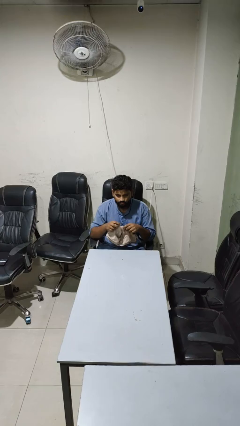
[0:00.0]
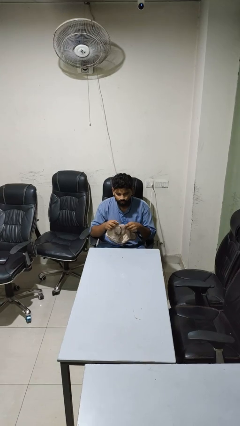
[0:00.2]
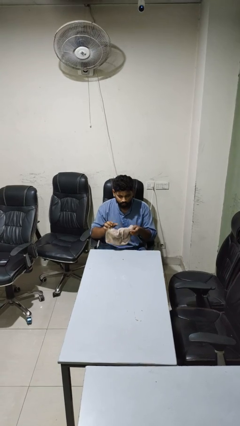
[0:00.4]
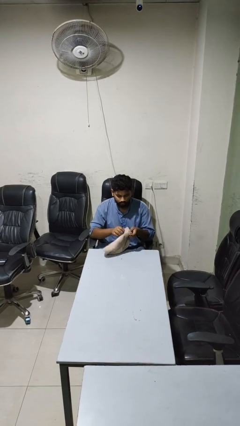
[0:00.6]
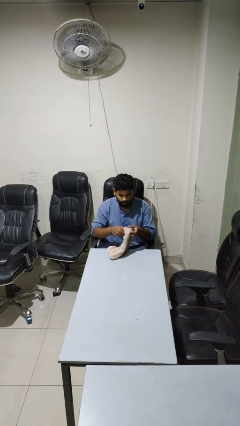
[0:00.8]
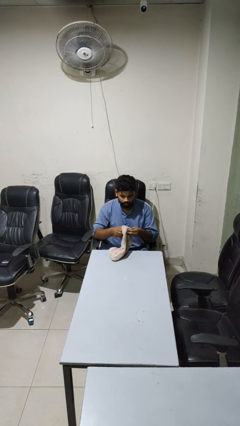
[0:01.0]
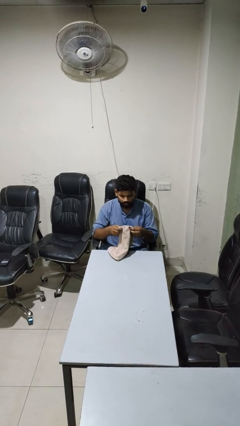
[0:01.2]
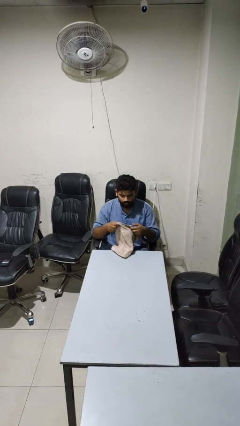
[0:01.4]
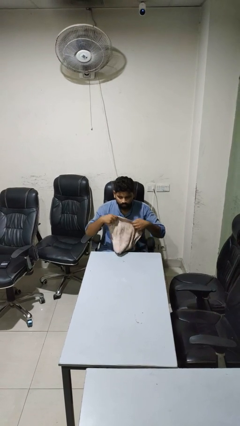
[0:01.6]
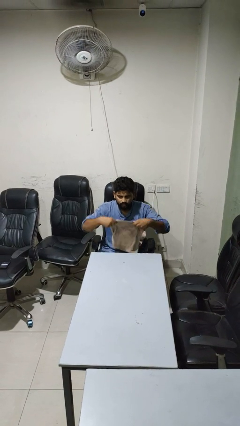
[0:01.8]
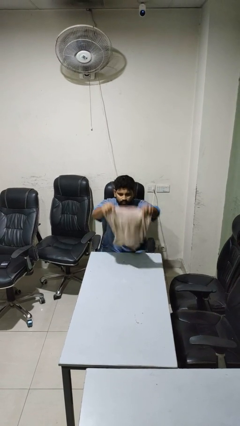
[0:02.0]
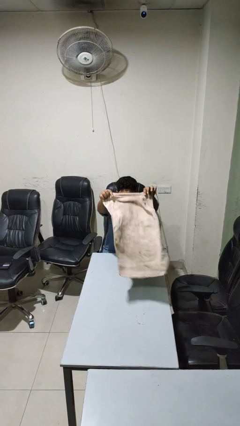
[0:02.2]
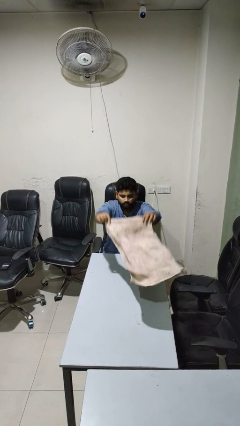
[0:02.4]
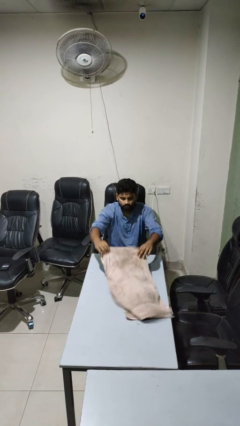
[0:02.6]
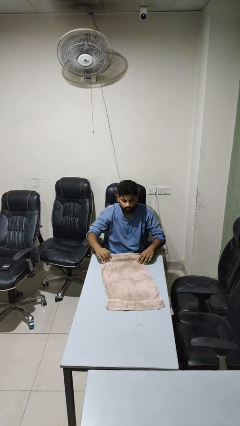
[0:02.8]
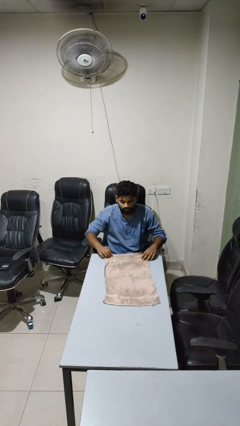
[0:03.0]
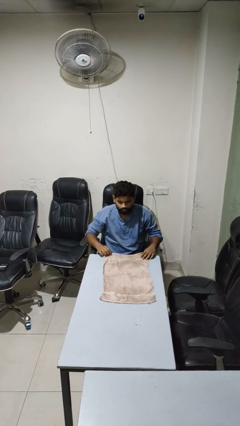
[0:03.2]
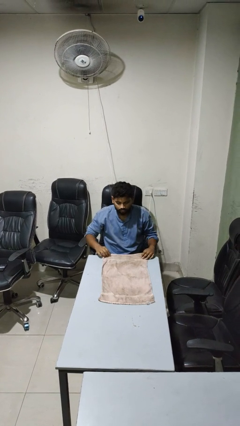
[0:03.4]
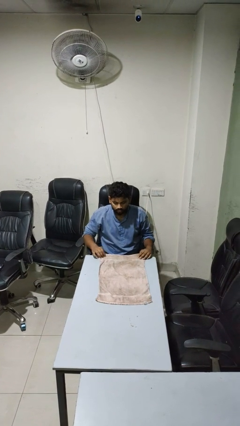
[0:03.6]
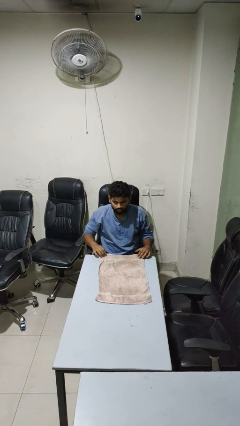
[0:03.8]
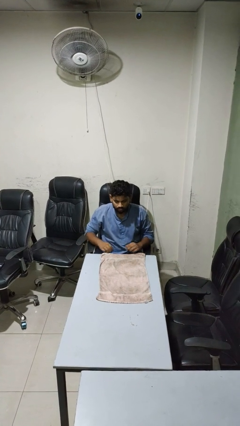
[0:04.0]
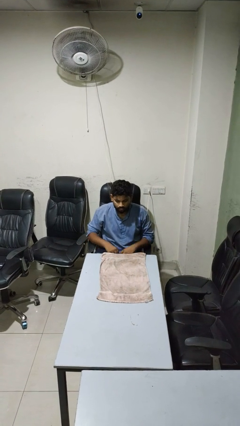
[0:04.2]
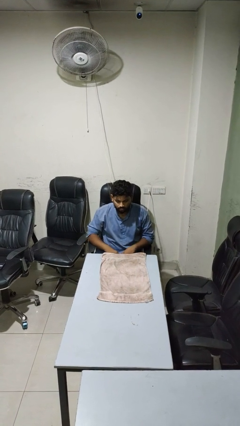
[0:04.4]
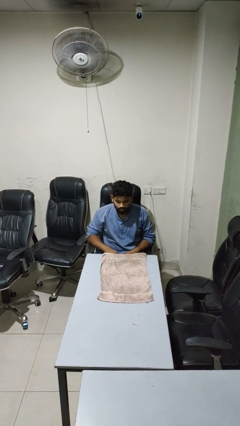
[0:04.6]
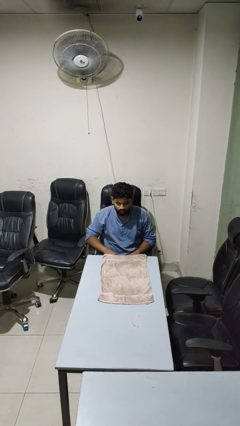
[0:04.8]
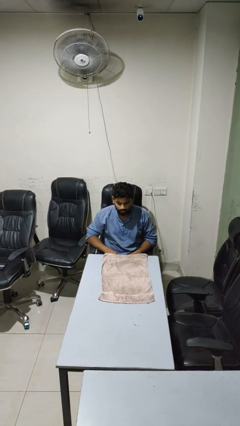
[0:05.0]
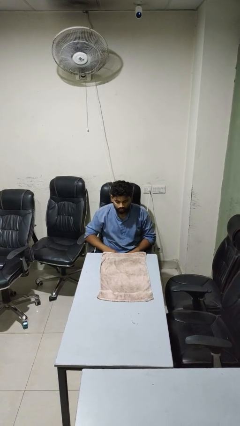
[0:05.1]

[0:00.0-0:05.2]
person spreads tablecloth

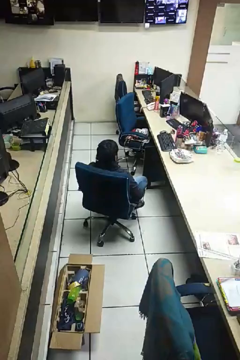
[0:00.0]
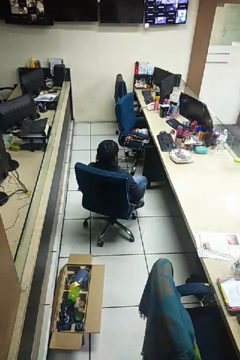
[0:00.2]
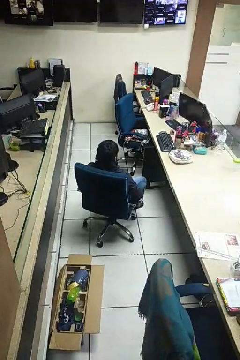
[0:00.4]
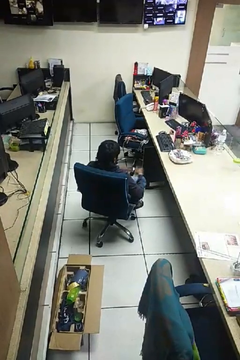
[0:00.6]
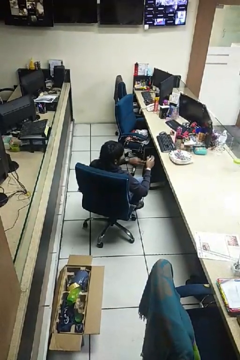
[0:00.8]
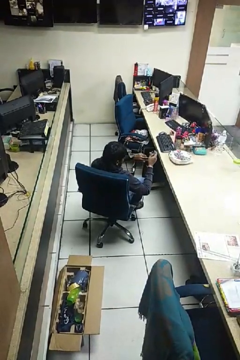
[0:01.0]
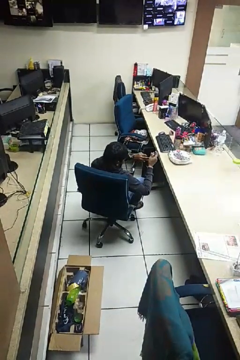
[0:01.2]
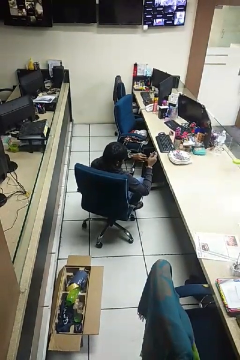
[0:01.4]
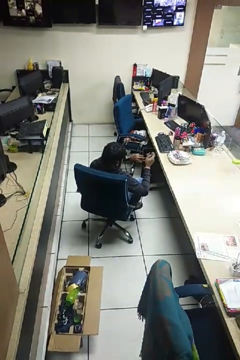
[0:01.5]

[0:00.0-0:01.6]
person clips fingernails

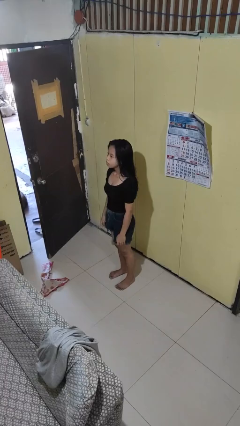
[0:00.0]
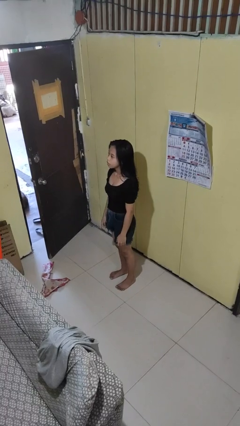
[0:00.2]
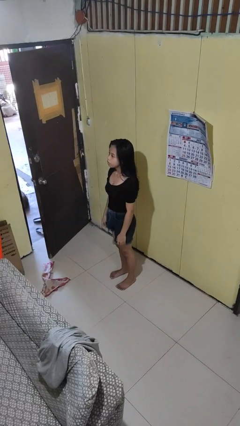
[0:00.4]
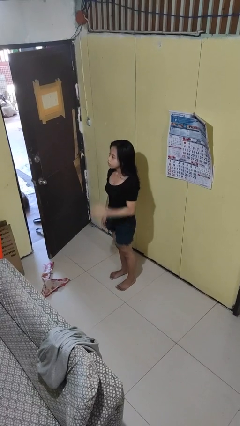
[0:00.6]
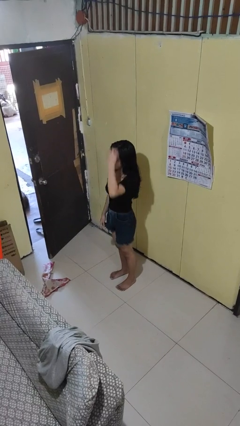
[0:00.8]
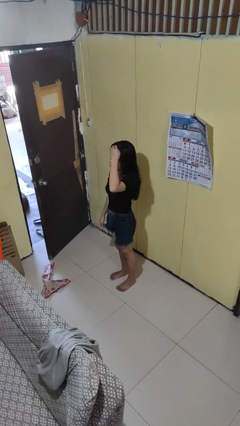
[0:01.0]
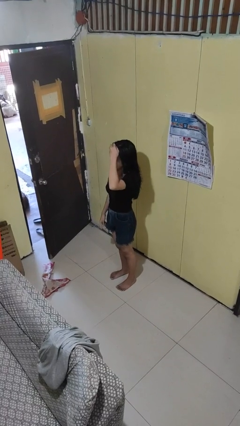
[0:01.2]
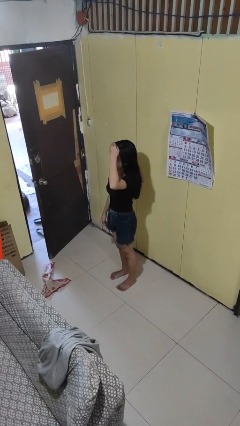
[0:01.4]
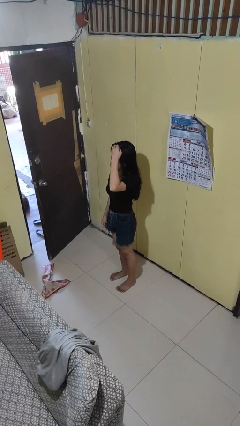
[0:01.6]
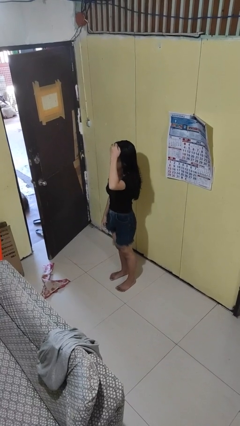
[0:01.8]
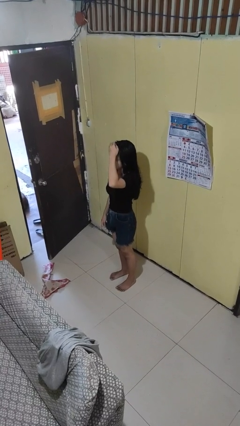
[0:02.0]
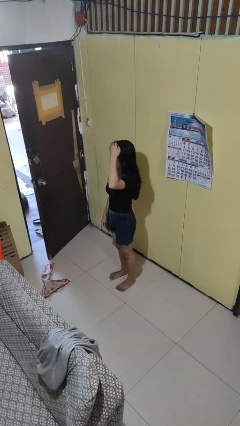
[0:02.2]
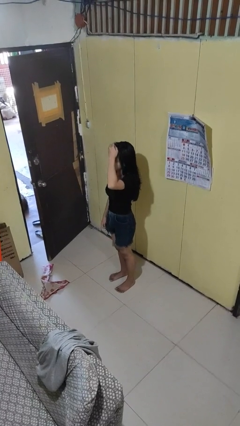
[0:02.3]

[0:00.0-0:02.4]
person scratches face

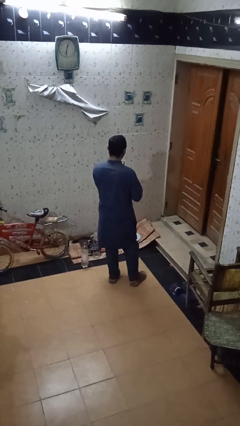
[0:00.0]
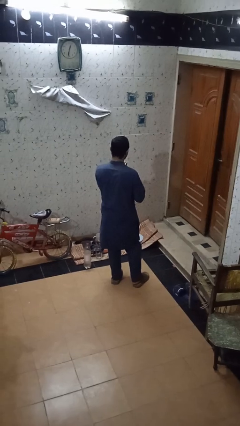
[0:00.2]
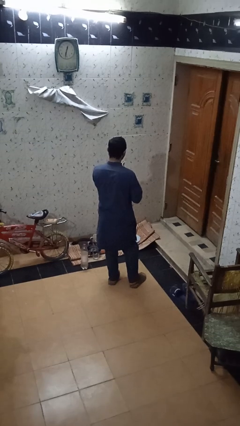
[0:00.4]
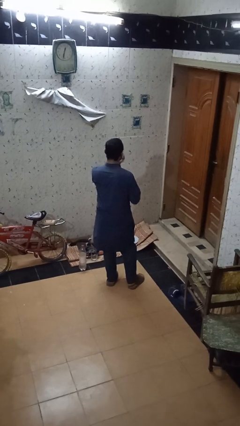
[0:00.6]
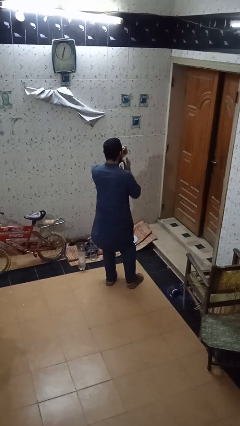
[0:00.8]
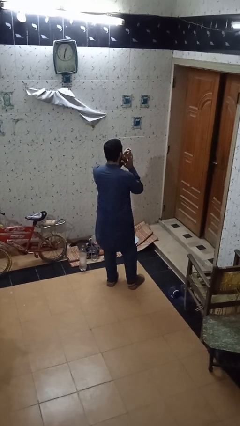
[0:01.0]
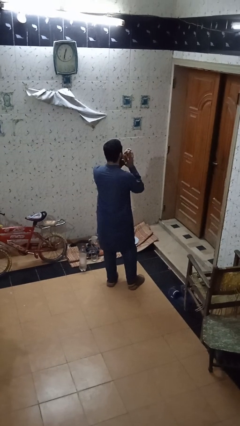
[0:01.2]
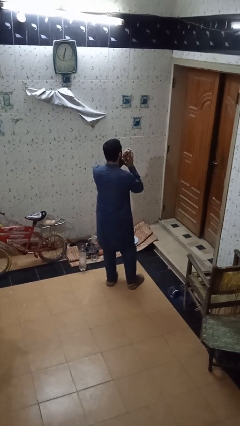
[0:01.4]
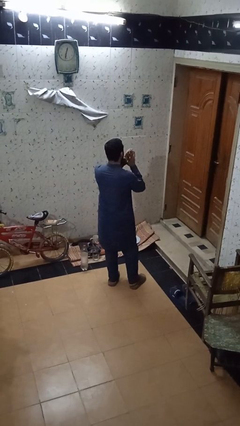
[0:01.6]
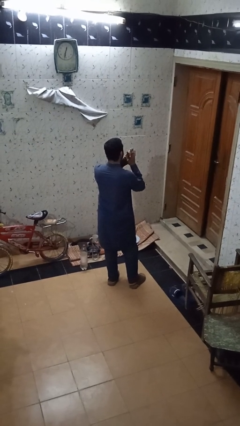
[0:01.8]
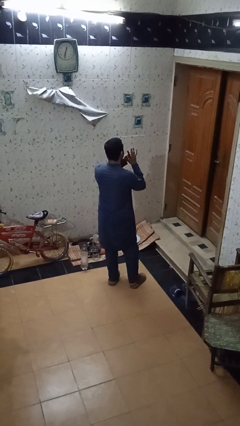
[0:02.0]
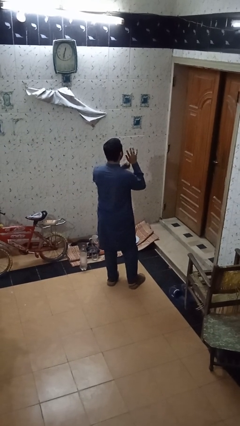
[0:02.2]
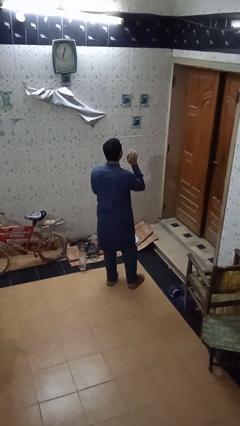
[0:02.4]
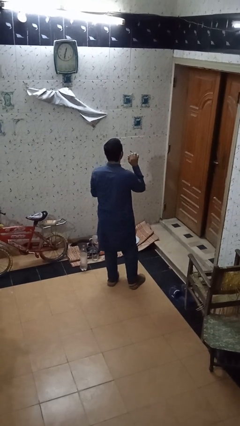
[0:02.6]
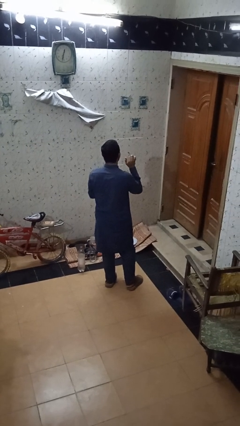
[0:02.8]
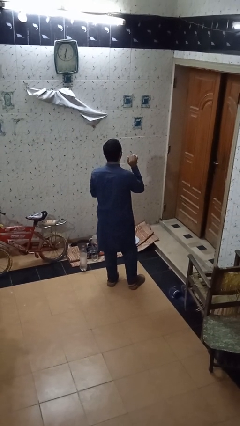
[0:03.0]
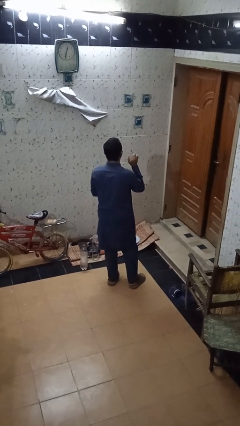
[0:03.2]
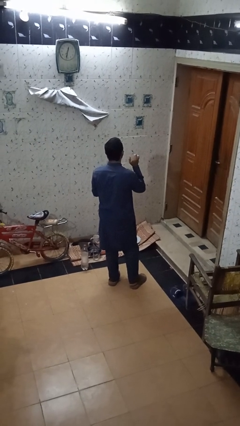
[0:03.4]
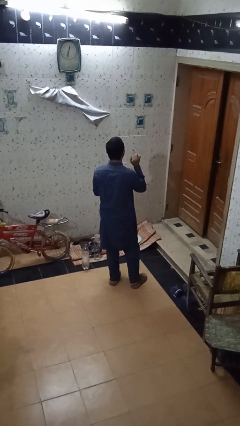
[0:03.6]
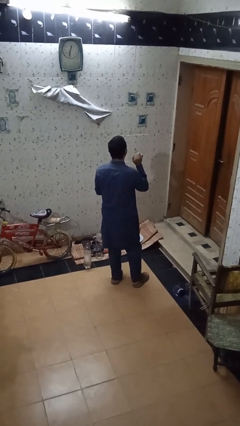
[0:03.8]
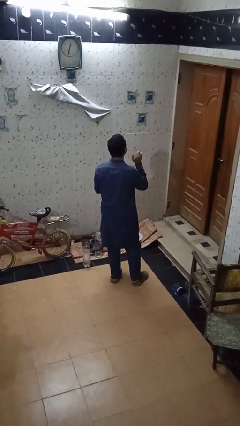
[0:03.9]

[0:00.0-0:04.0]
person puts on ring

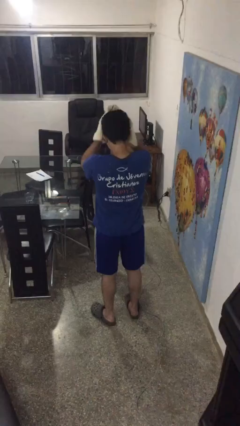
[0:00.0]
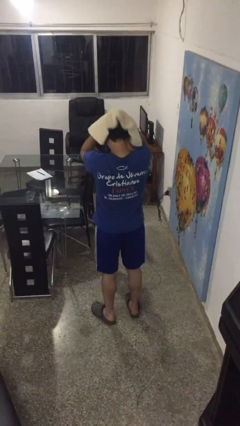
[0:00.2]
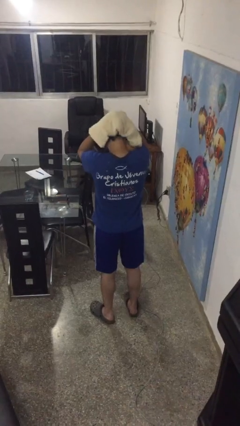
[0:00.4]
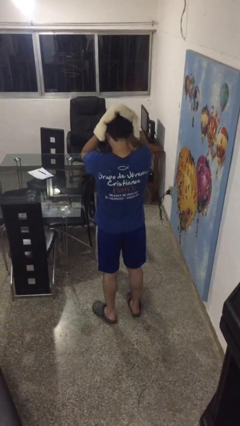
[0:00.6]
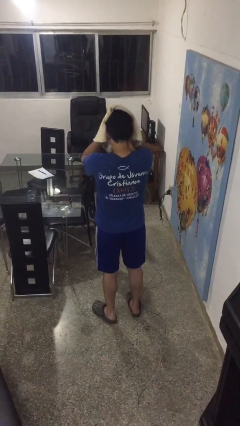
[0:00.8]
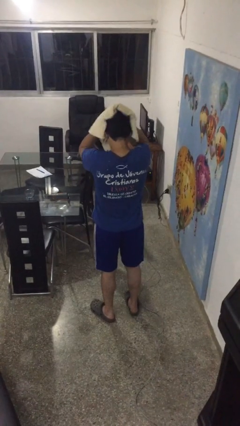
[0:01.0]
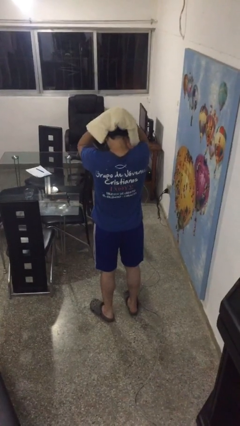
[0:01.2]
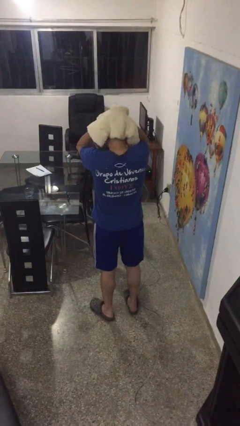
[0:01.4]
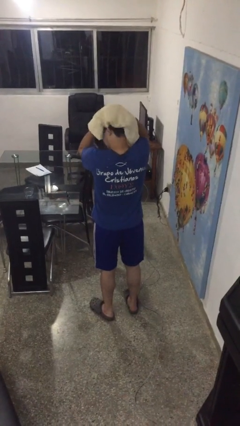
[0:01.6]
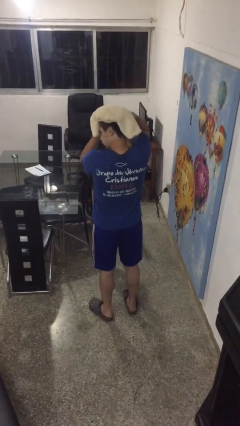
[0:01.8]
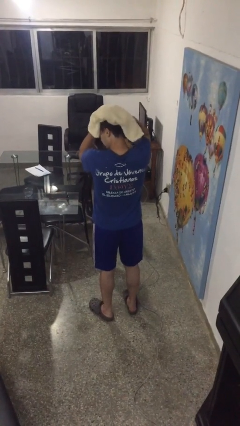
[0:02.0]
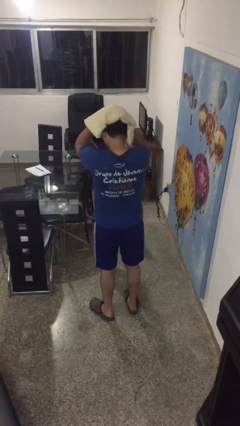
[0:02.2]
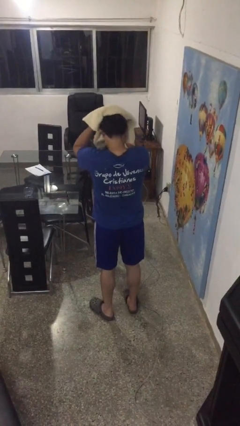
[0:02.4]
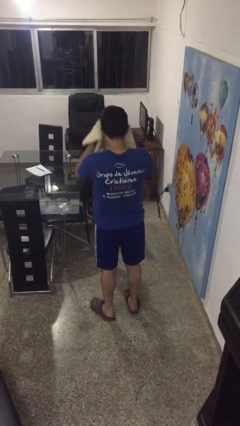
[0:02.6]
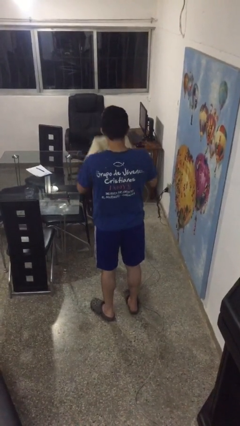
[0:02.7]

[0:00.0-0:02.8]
person dries hair with towel

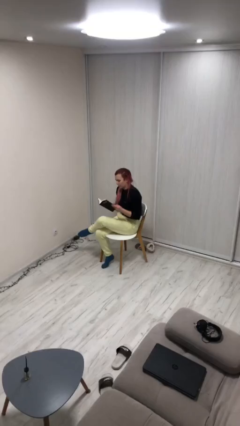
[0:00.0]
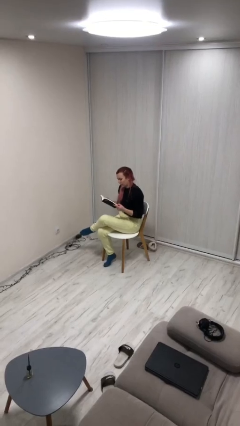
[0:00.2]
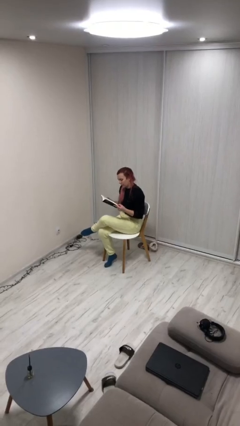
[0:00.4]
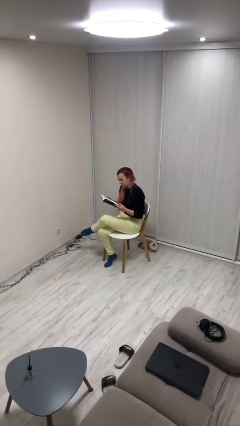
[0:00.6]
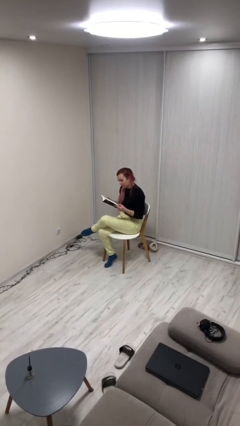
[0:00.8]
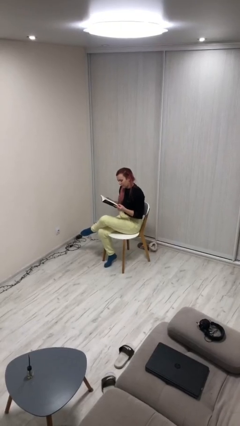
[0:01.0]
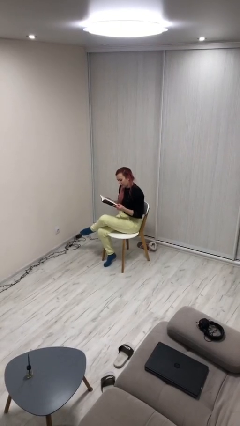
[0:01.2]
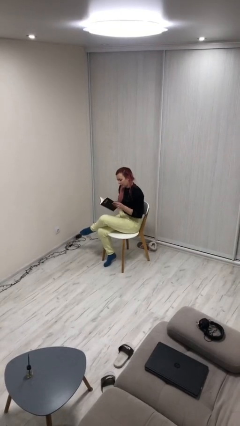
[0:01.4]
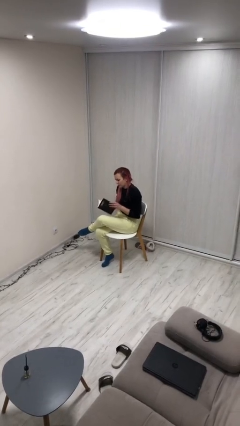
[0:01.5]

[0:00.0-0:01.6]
person reads document
